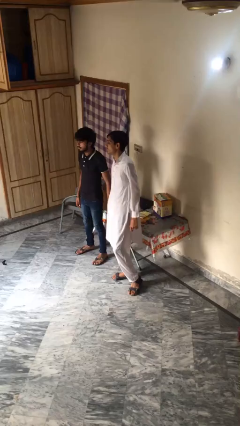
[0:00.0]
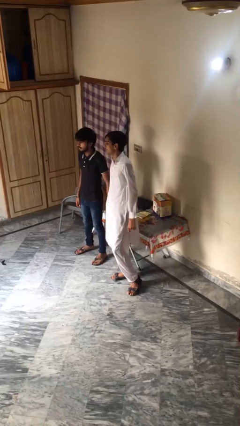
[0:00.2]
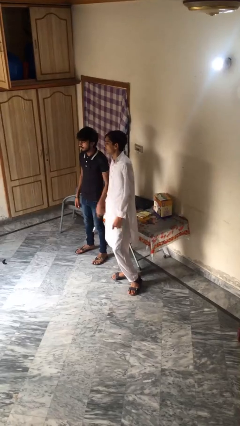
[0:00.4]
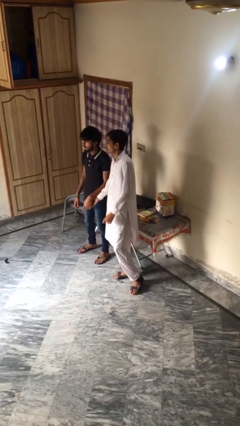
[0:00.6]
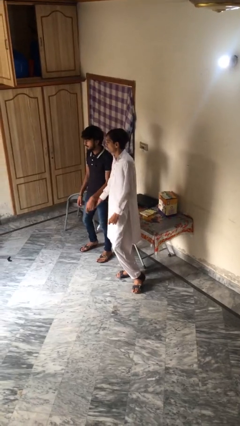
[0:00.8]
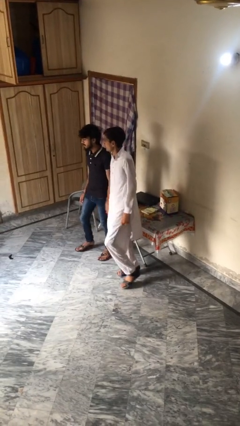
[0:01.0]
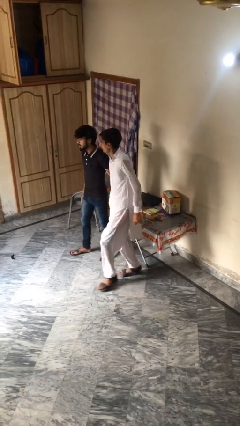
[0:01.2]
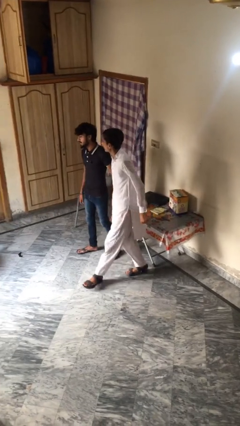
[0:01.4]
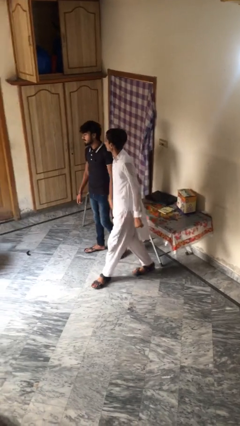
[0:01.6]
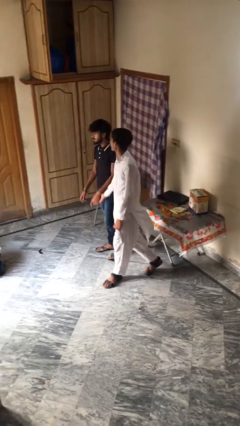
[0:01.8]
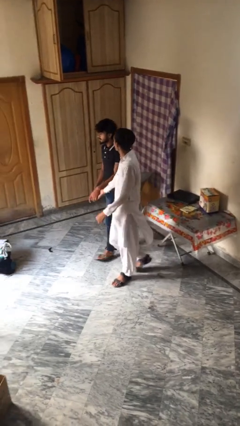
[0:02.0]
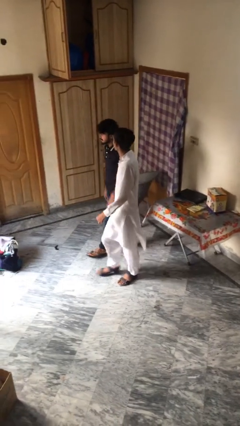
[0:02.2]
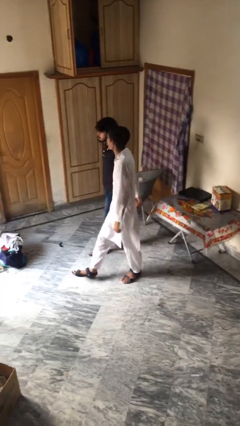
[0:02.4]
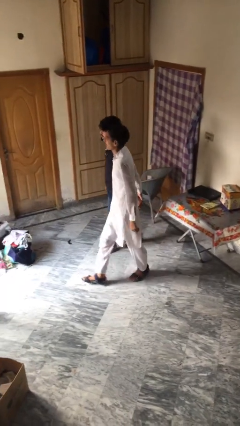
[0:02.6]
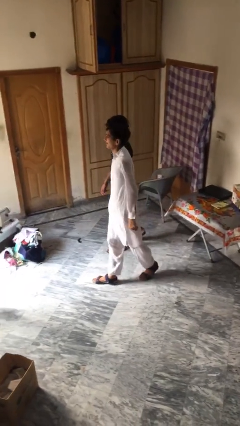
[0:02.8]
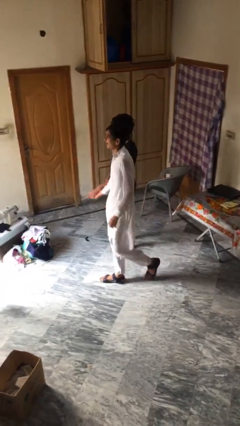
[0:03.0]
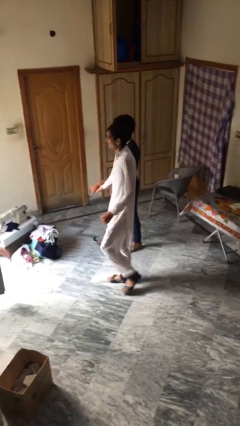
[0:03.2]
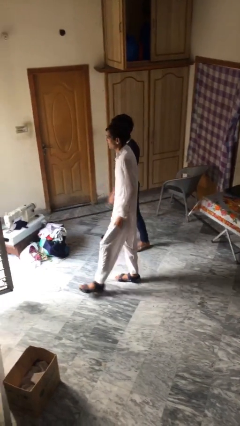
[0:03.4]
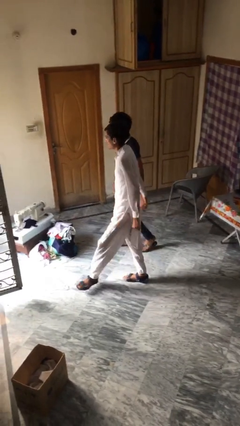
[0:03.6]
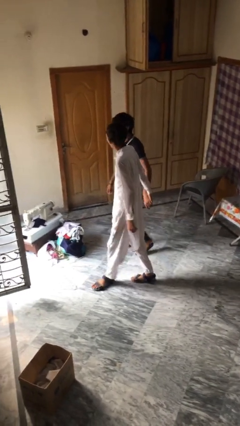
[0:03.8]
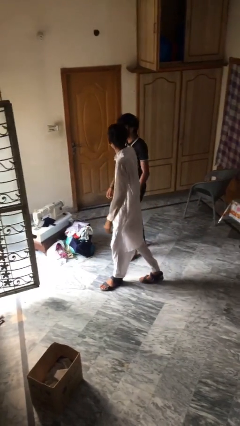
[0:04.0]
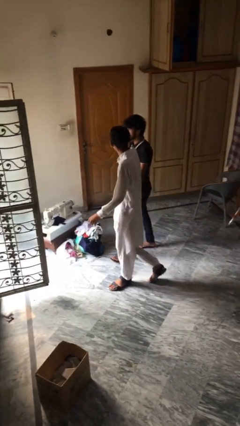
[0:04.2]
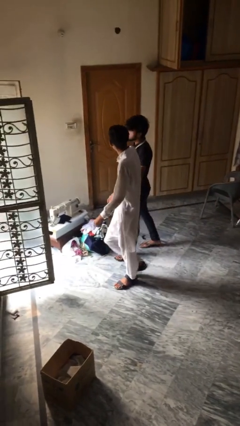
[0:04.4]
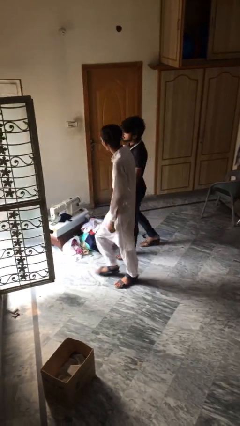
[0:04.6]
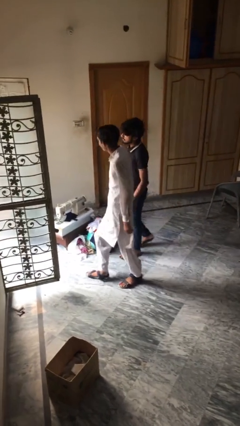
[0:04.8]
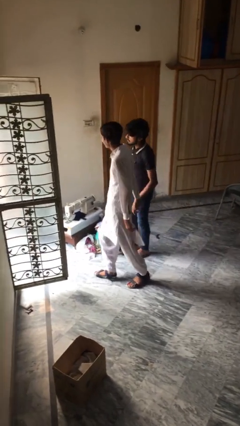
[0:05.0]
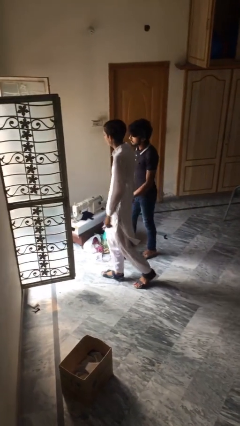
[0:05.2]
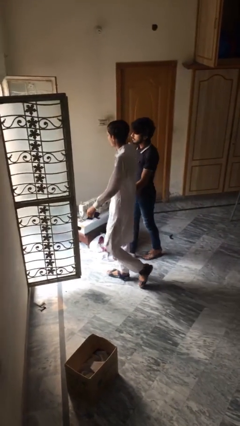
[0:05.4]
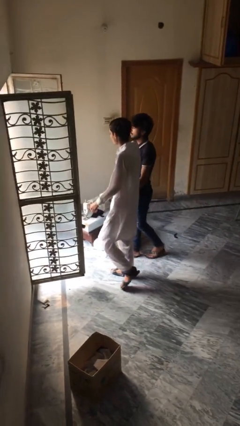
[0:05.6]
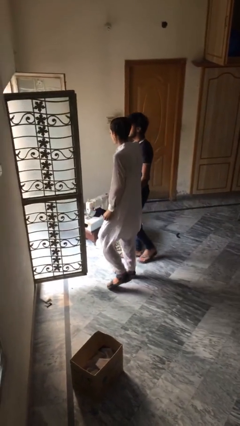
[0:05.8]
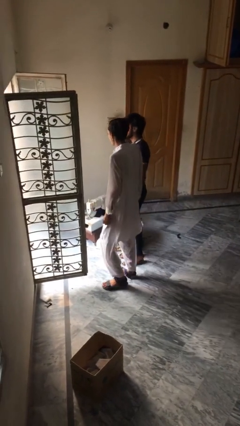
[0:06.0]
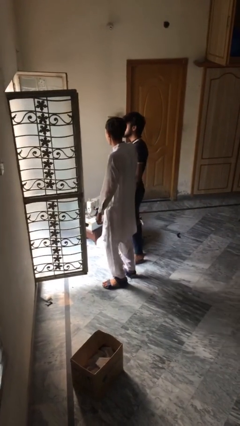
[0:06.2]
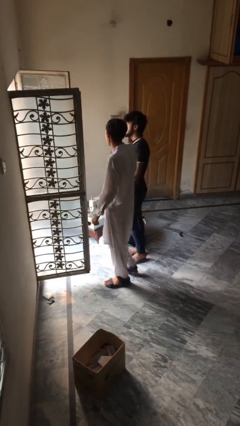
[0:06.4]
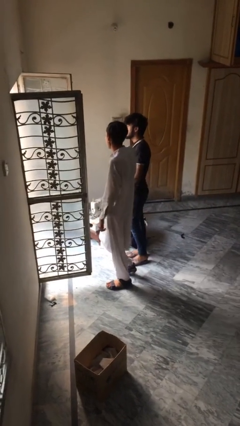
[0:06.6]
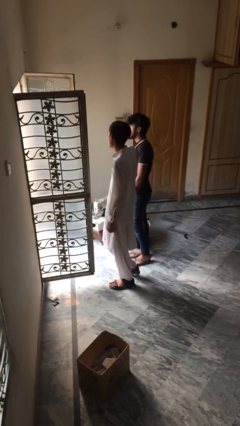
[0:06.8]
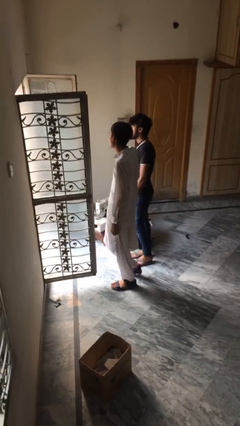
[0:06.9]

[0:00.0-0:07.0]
person holds hand

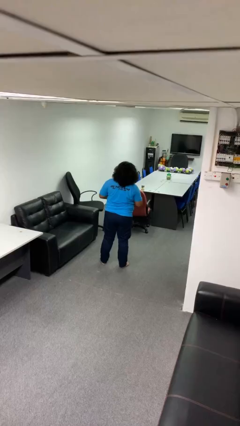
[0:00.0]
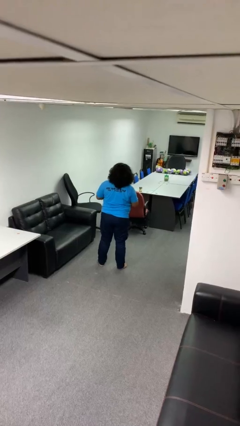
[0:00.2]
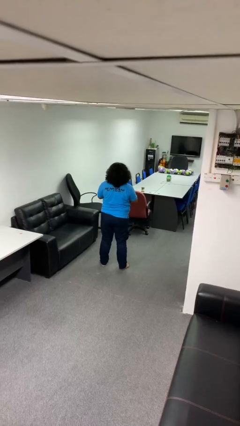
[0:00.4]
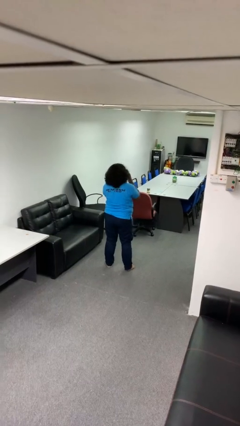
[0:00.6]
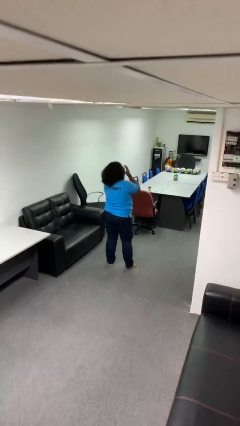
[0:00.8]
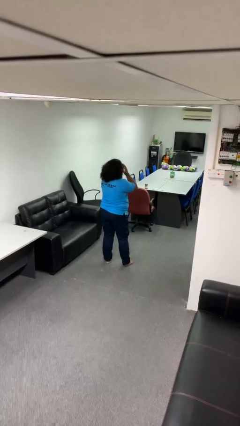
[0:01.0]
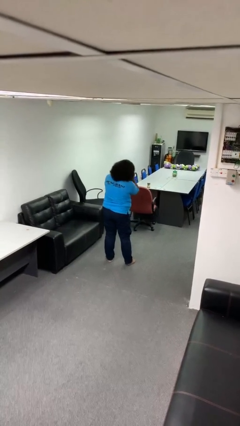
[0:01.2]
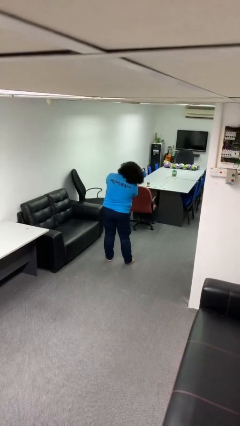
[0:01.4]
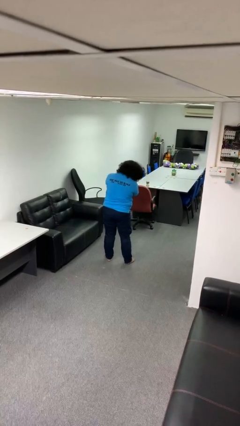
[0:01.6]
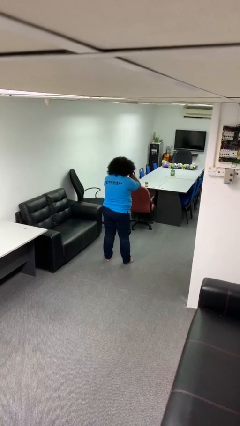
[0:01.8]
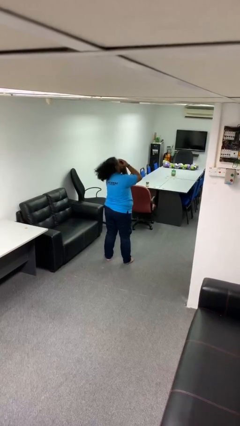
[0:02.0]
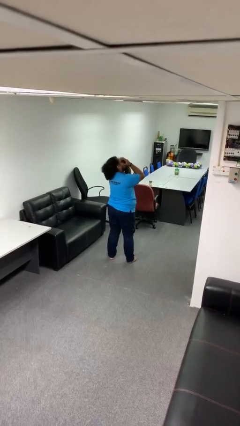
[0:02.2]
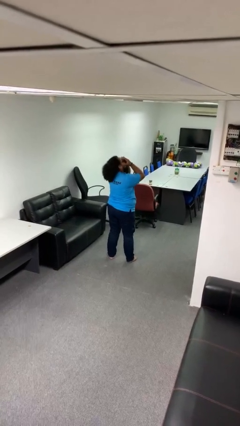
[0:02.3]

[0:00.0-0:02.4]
person covers face with hands

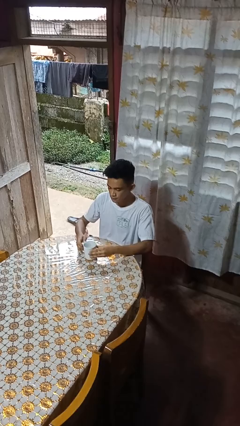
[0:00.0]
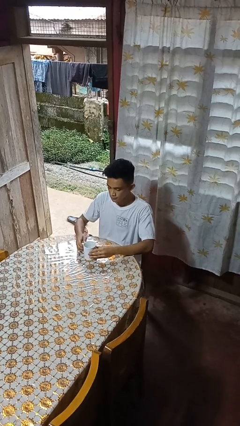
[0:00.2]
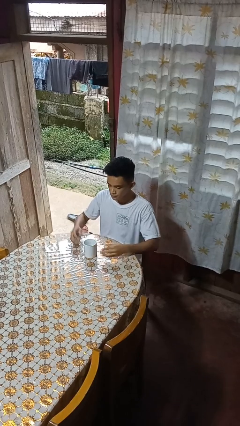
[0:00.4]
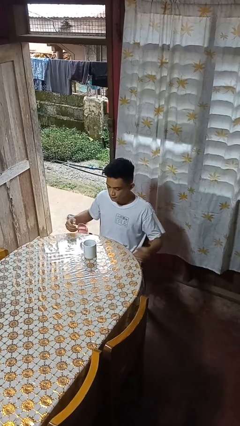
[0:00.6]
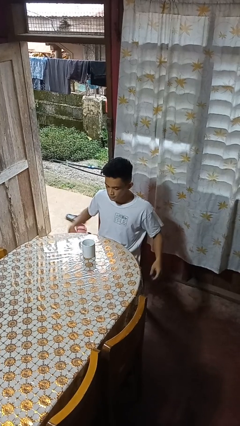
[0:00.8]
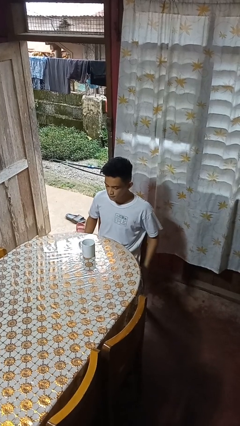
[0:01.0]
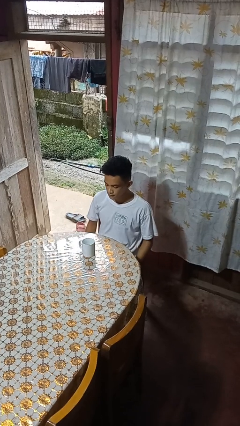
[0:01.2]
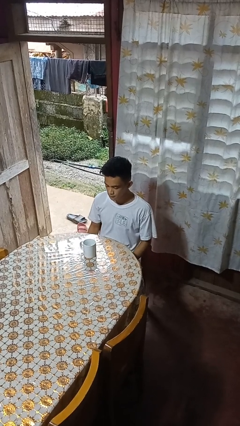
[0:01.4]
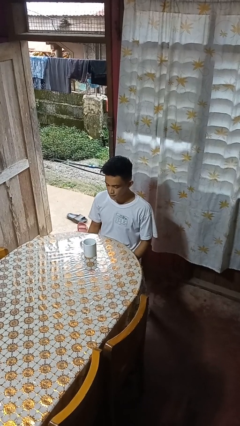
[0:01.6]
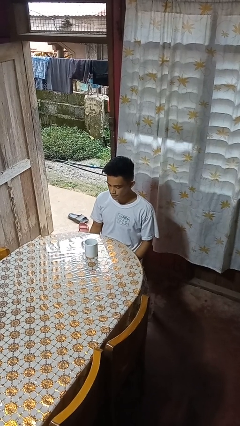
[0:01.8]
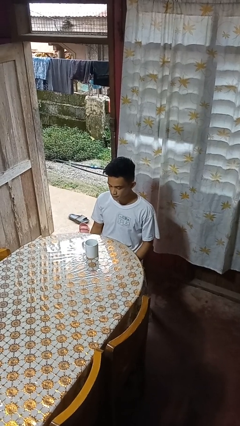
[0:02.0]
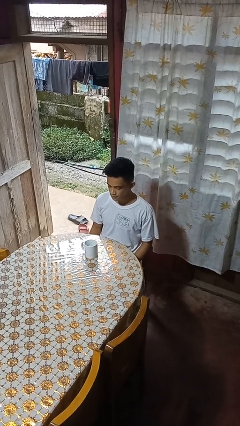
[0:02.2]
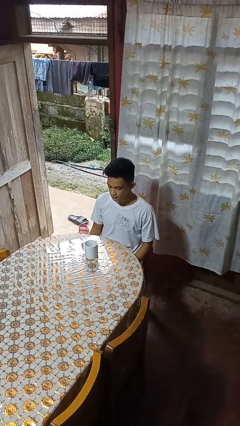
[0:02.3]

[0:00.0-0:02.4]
person puts down object on table

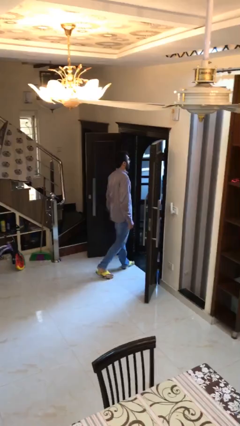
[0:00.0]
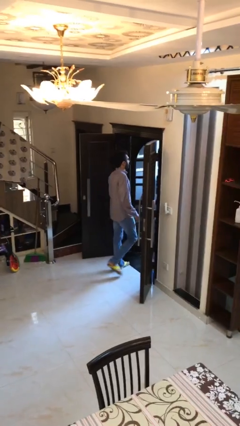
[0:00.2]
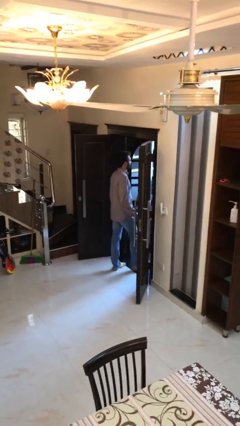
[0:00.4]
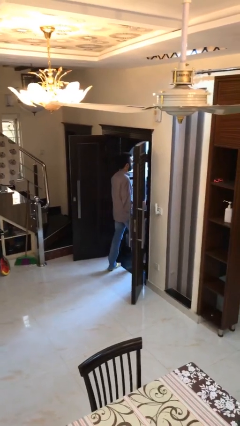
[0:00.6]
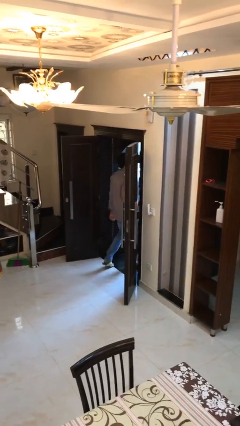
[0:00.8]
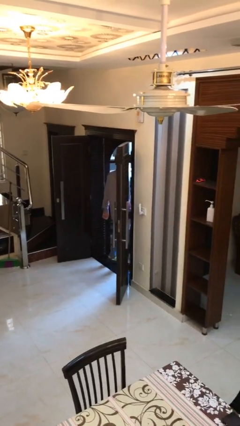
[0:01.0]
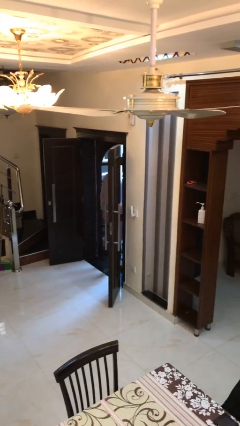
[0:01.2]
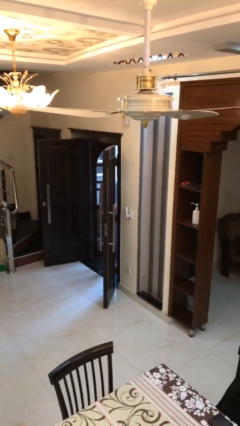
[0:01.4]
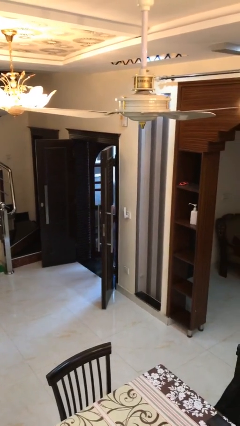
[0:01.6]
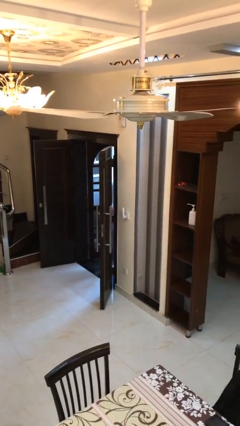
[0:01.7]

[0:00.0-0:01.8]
person exits scene through structure

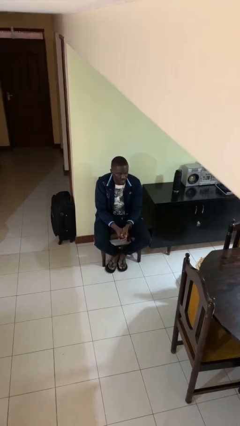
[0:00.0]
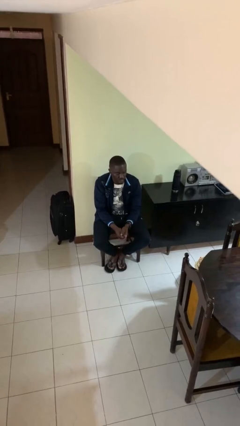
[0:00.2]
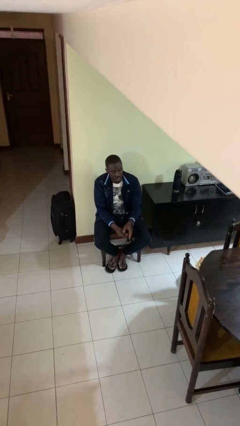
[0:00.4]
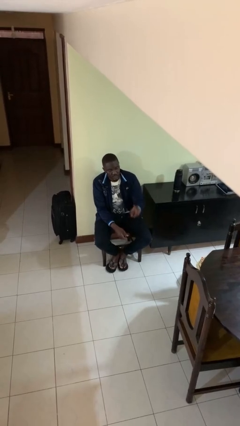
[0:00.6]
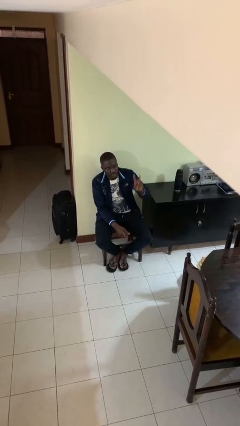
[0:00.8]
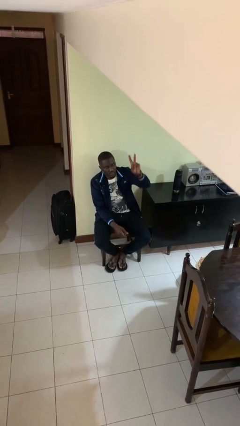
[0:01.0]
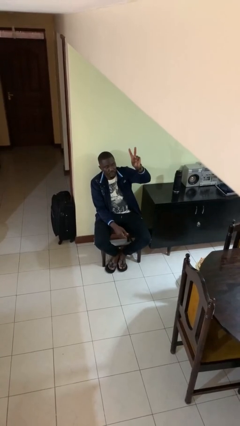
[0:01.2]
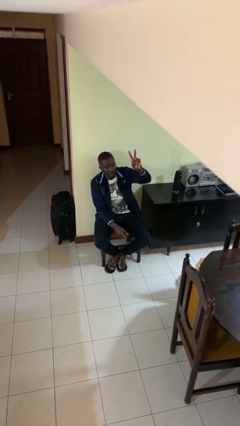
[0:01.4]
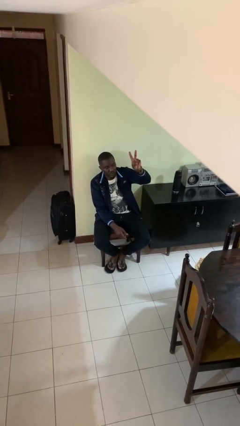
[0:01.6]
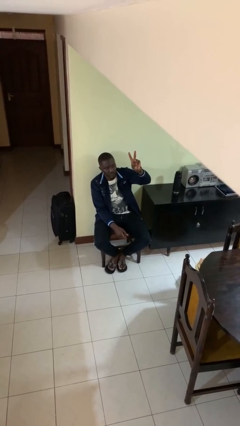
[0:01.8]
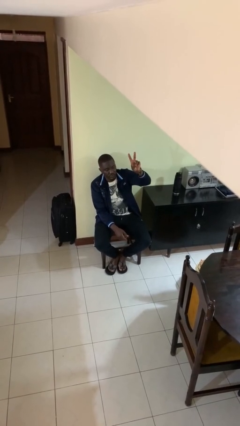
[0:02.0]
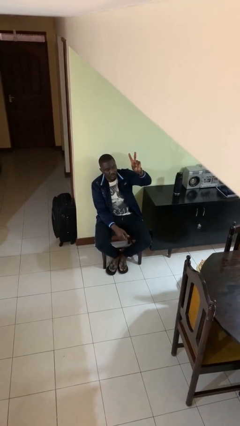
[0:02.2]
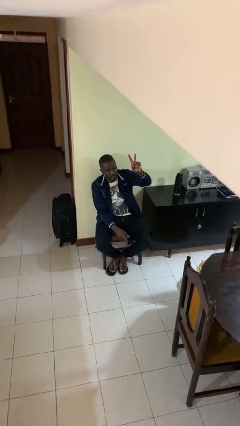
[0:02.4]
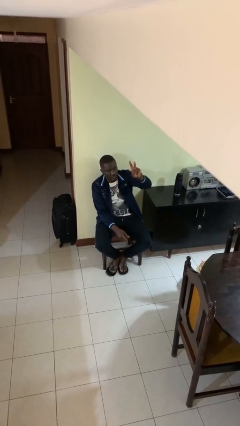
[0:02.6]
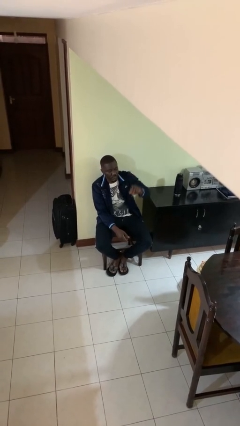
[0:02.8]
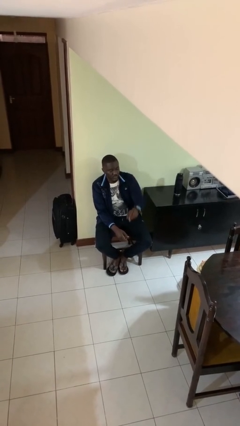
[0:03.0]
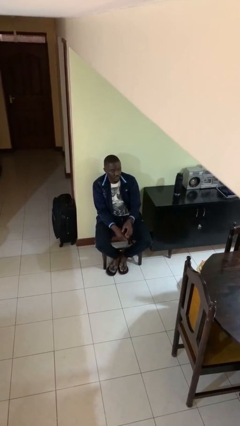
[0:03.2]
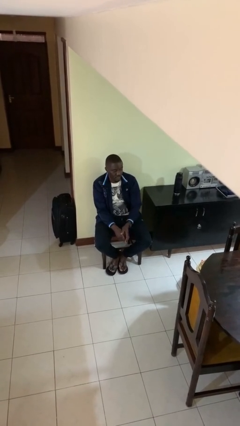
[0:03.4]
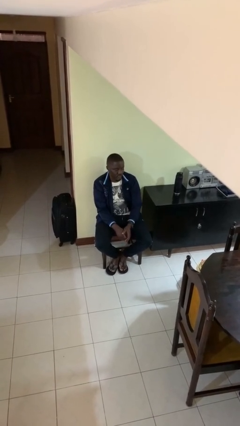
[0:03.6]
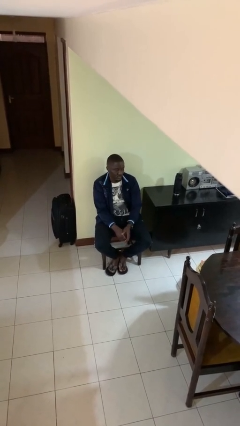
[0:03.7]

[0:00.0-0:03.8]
person gestures peace

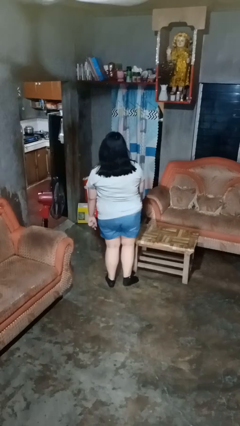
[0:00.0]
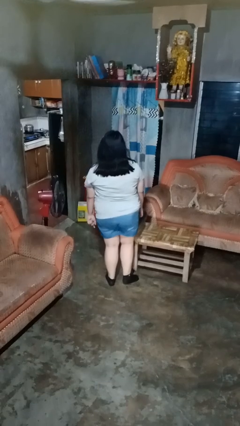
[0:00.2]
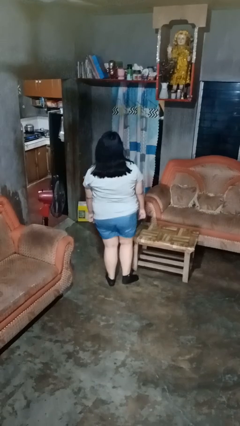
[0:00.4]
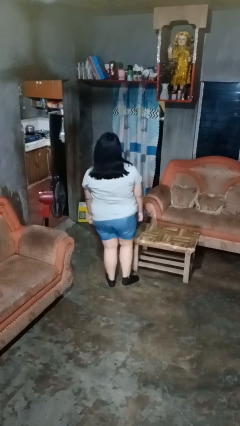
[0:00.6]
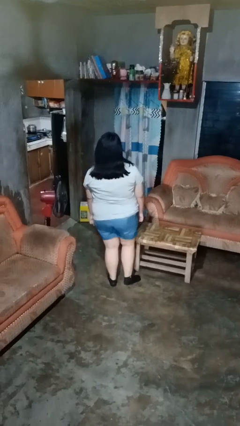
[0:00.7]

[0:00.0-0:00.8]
person bumps into table
